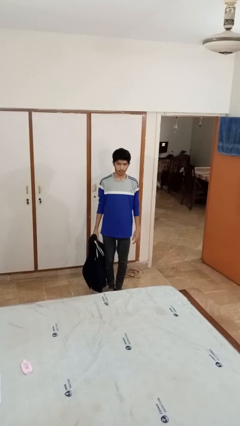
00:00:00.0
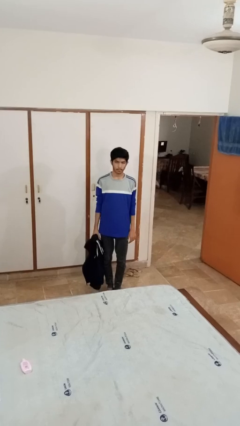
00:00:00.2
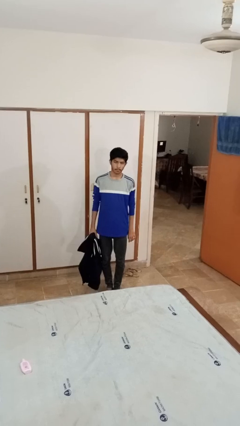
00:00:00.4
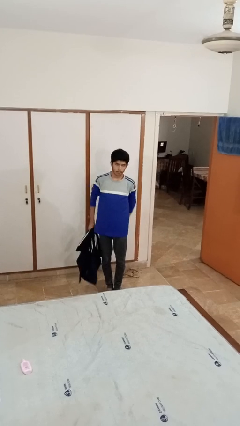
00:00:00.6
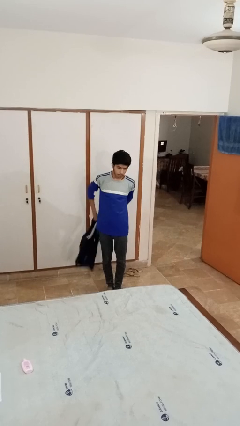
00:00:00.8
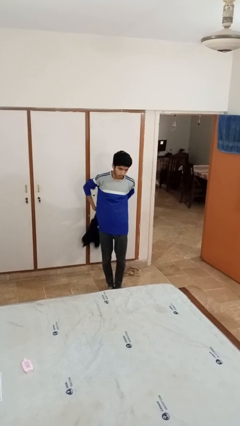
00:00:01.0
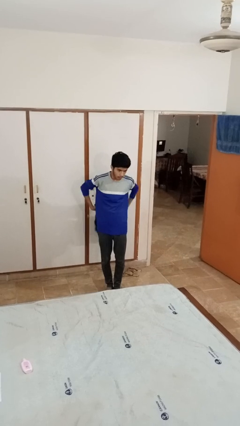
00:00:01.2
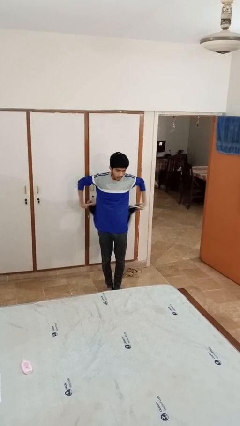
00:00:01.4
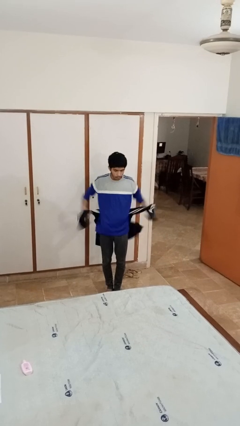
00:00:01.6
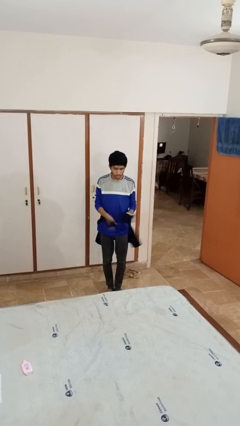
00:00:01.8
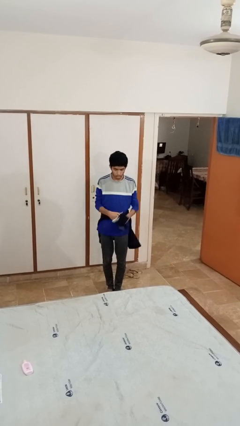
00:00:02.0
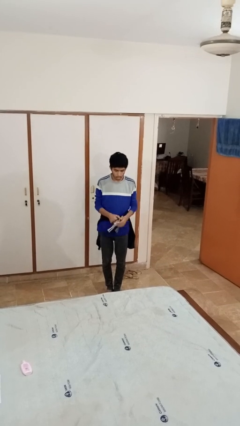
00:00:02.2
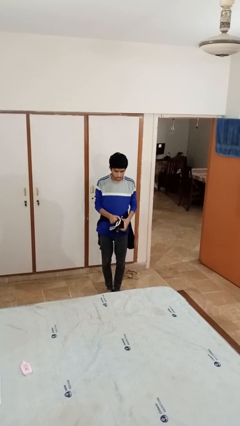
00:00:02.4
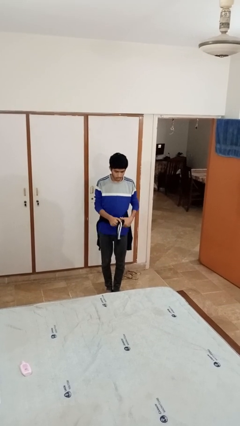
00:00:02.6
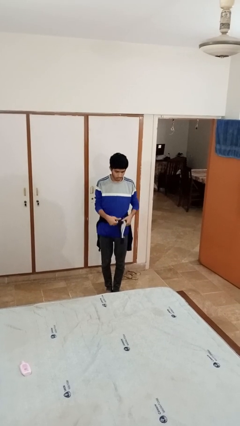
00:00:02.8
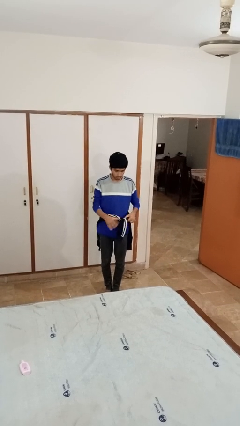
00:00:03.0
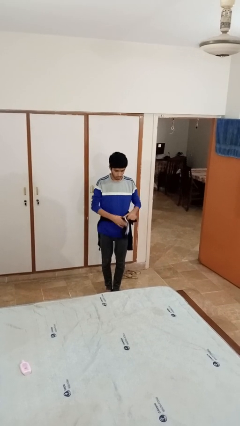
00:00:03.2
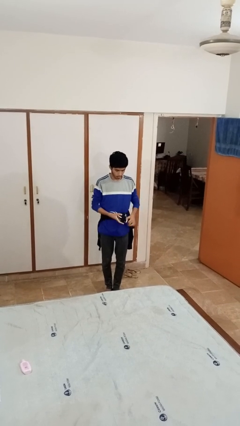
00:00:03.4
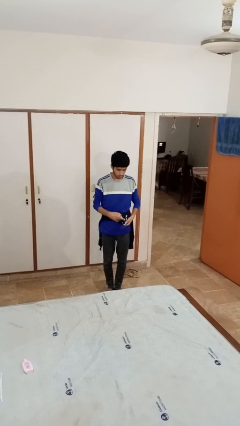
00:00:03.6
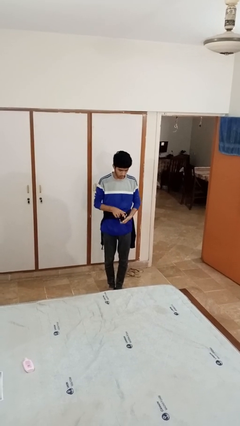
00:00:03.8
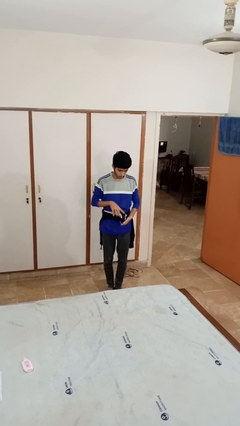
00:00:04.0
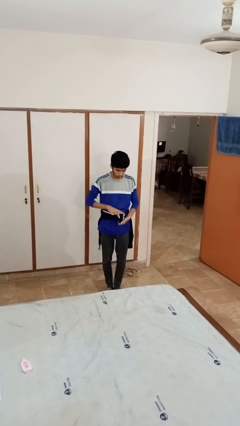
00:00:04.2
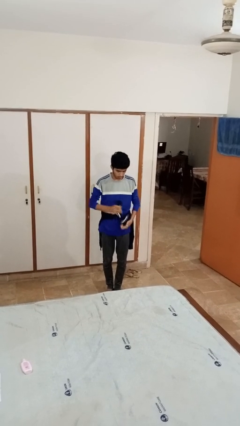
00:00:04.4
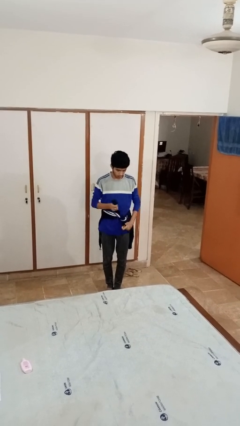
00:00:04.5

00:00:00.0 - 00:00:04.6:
person ties jacket around waist

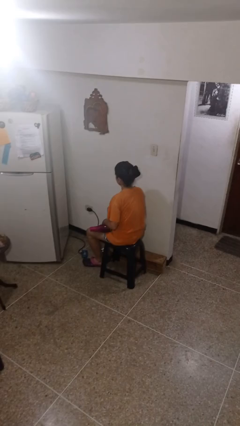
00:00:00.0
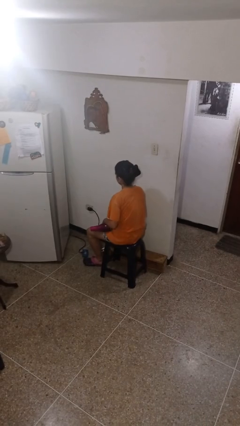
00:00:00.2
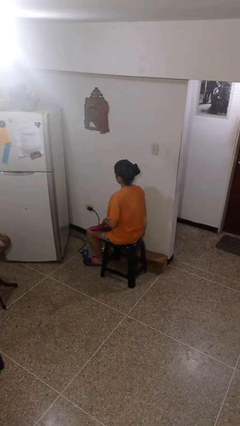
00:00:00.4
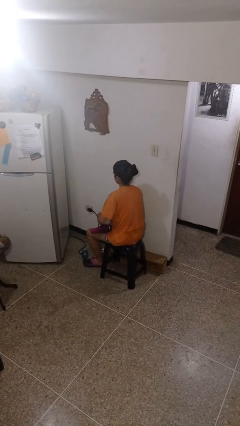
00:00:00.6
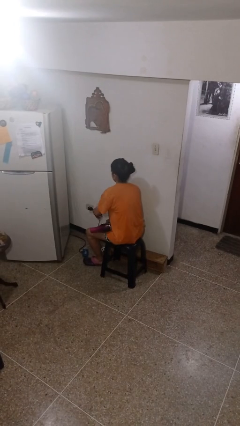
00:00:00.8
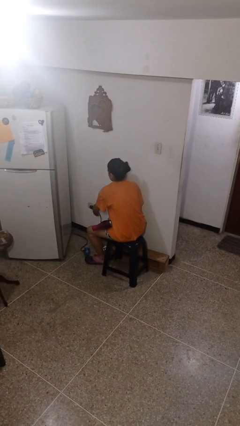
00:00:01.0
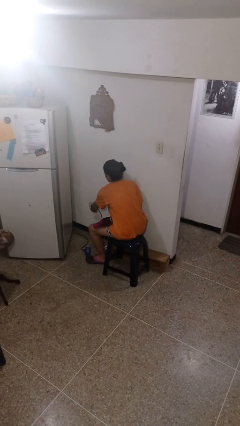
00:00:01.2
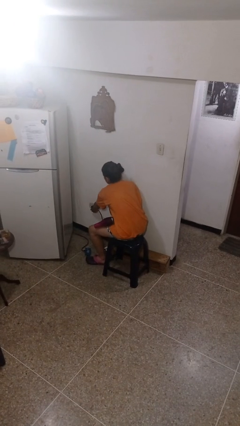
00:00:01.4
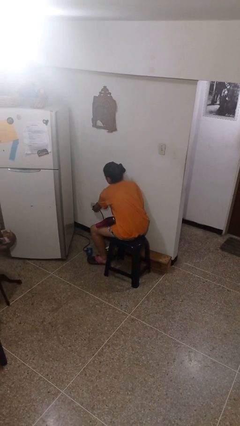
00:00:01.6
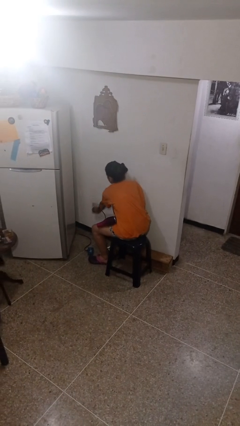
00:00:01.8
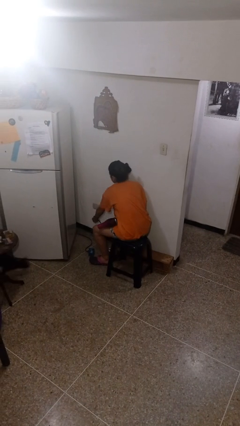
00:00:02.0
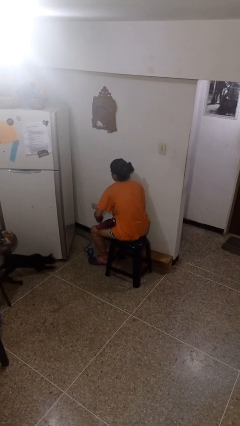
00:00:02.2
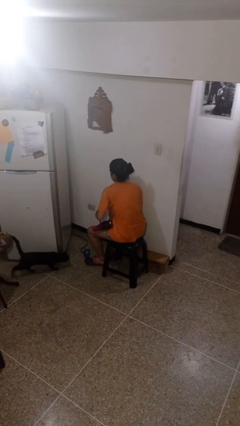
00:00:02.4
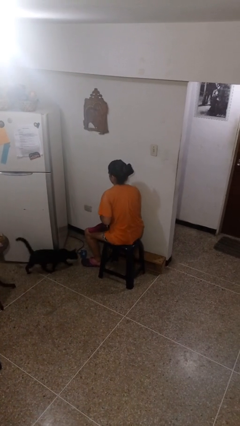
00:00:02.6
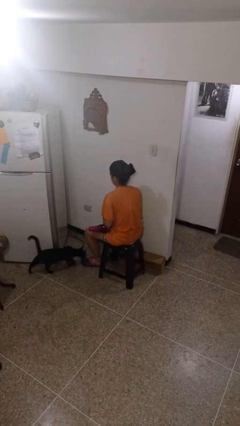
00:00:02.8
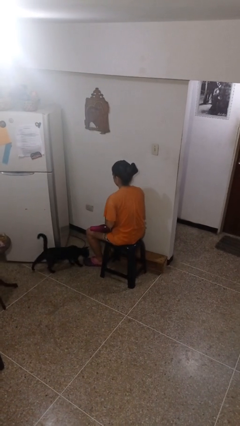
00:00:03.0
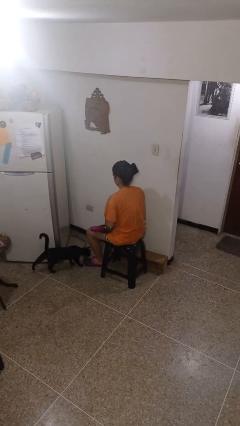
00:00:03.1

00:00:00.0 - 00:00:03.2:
person unplugs from electrical socket

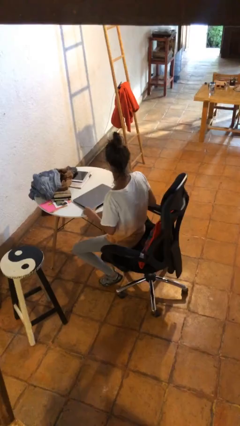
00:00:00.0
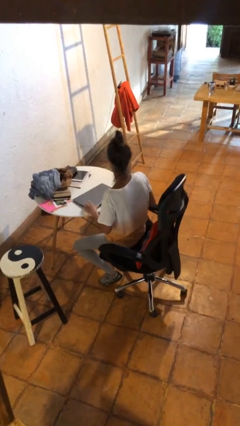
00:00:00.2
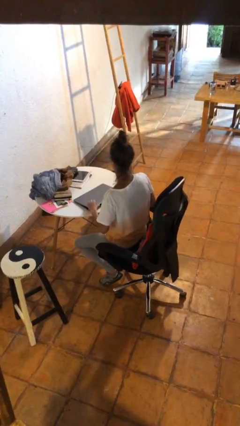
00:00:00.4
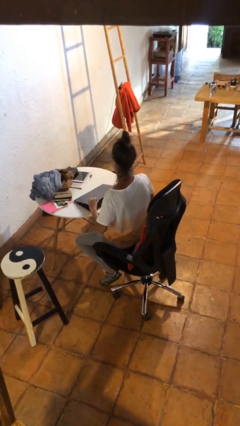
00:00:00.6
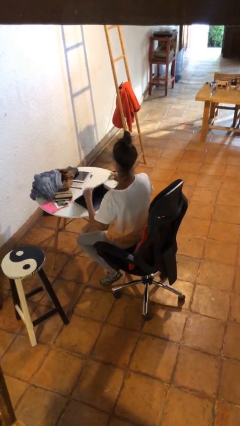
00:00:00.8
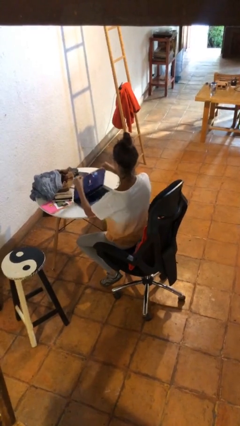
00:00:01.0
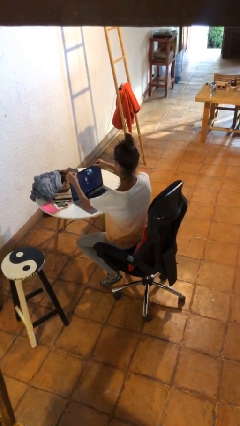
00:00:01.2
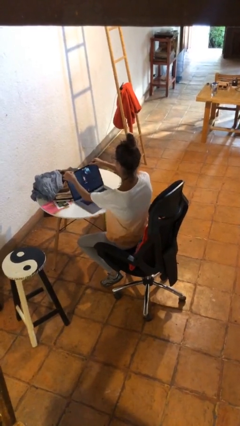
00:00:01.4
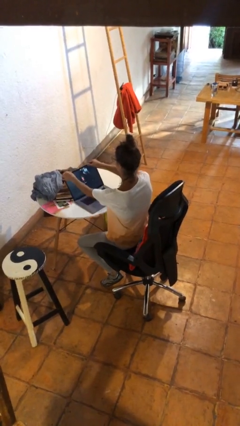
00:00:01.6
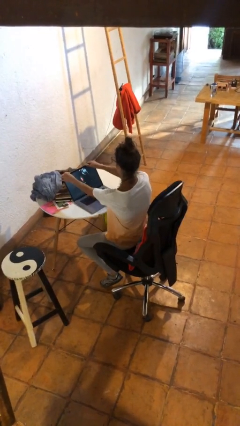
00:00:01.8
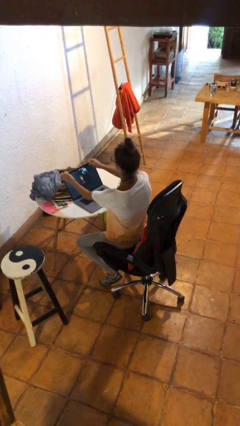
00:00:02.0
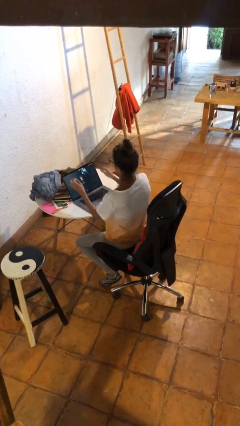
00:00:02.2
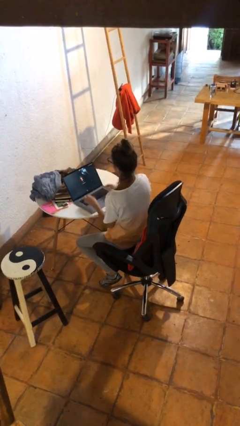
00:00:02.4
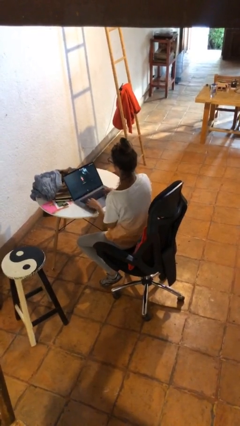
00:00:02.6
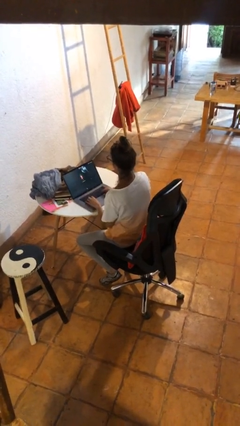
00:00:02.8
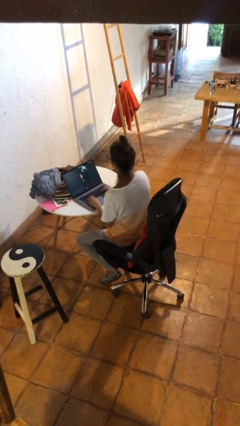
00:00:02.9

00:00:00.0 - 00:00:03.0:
person opens laptop

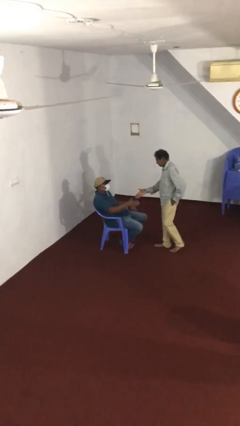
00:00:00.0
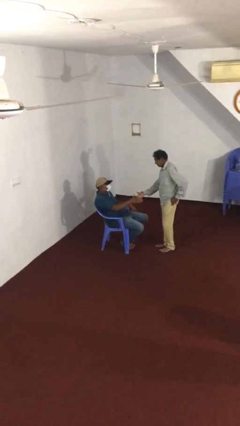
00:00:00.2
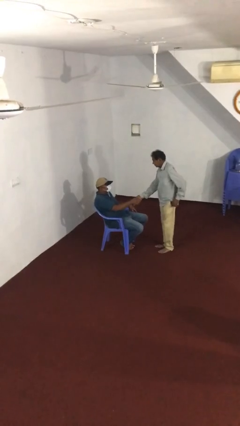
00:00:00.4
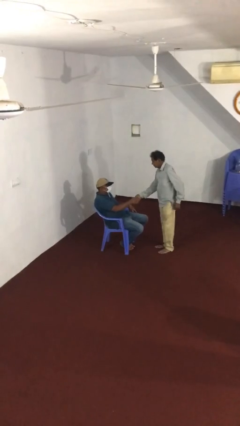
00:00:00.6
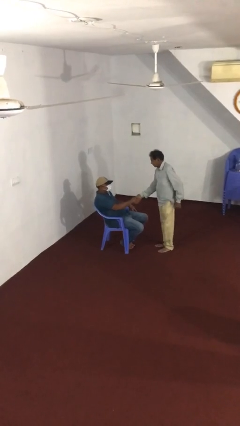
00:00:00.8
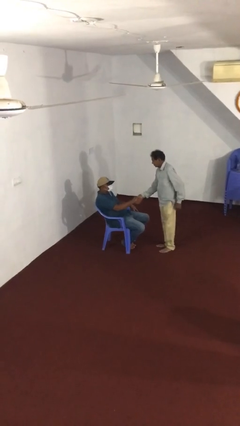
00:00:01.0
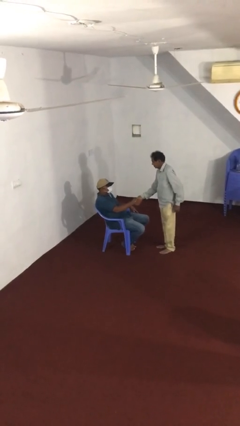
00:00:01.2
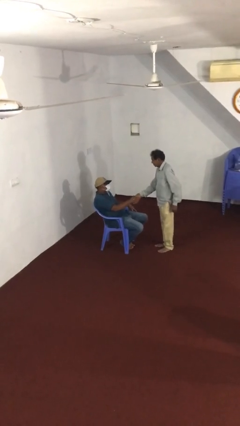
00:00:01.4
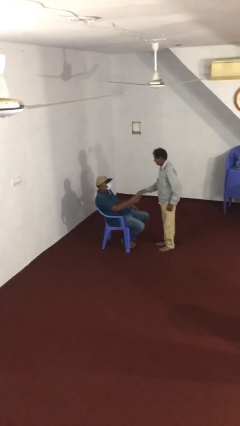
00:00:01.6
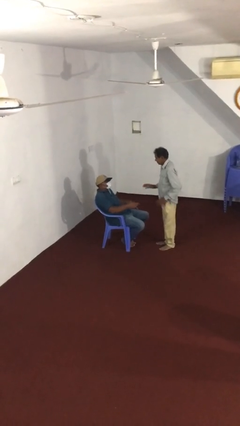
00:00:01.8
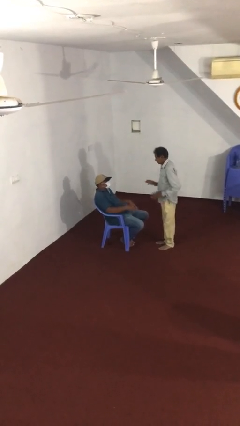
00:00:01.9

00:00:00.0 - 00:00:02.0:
person shakes hand

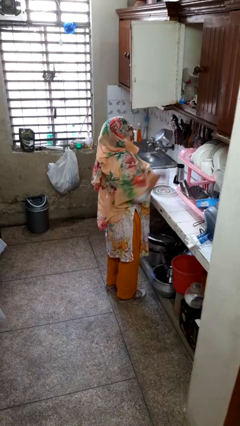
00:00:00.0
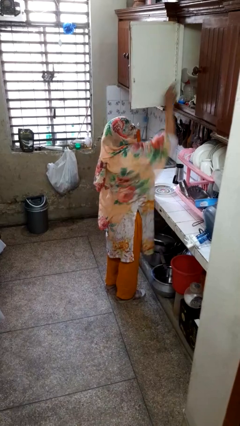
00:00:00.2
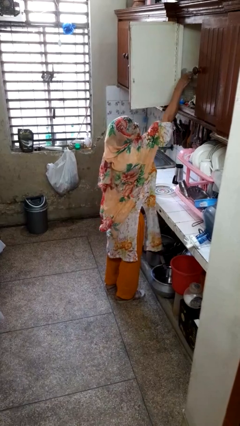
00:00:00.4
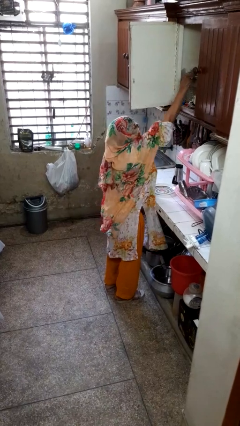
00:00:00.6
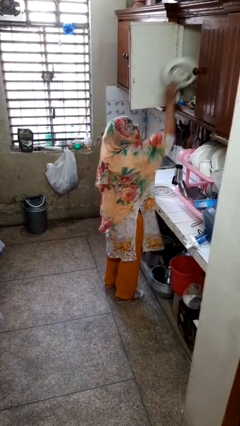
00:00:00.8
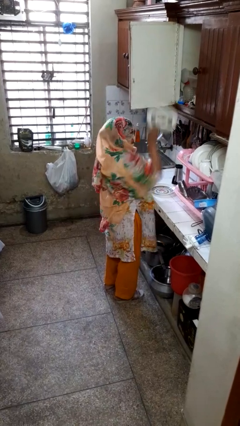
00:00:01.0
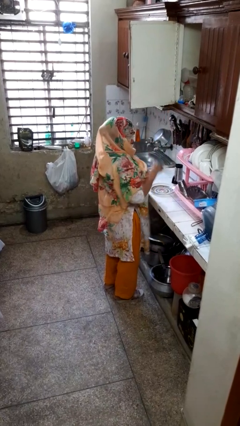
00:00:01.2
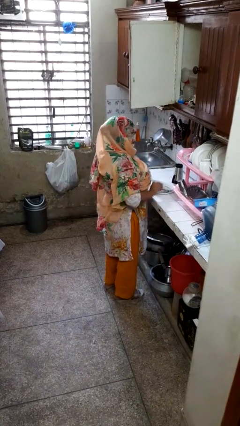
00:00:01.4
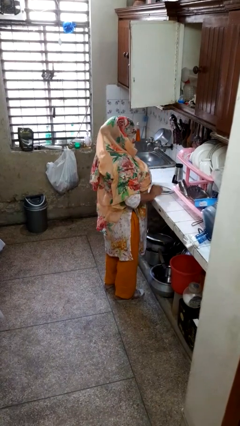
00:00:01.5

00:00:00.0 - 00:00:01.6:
person takes object from cabinet

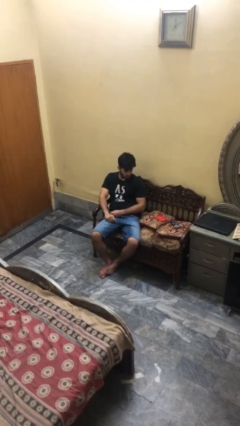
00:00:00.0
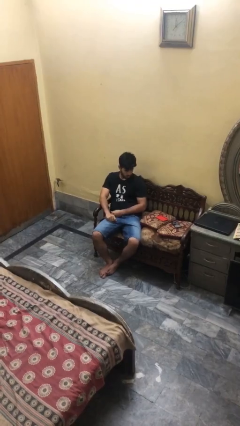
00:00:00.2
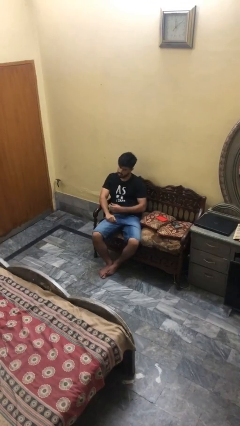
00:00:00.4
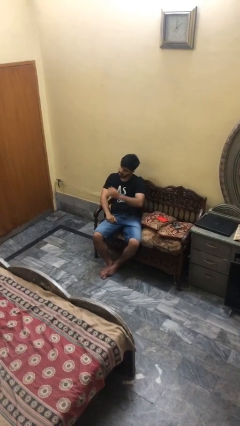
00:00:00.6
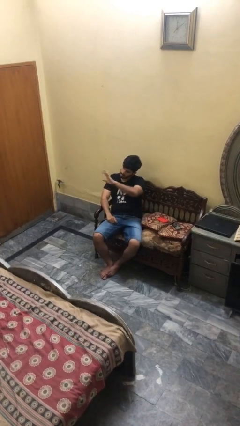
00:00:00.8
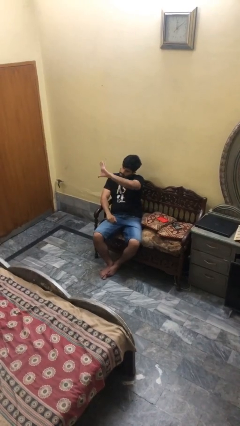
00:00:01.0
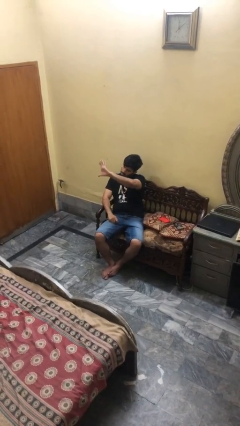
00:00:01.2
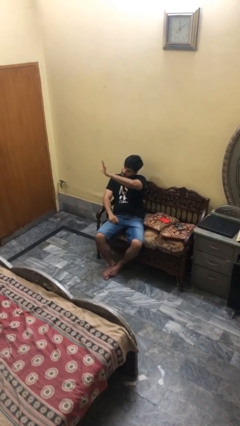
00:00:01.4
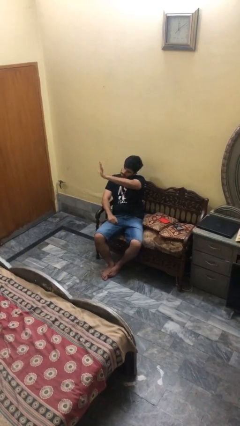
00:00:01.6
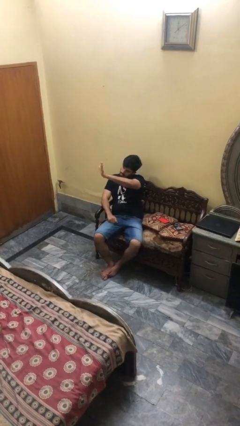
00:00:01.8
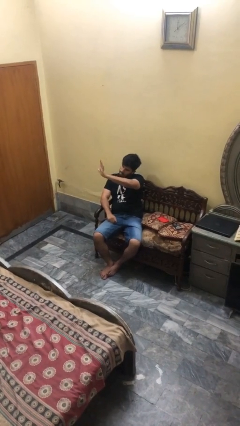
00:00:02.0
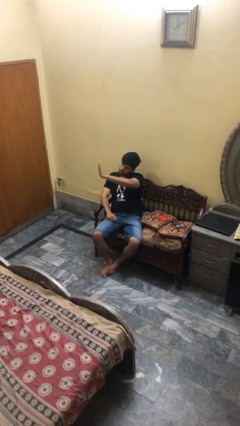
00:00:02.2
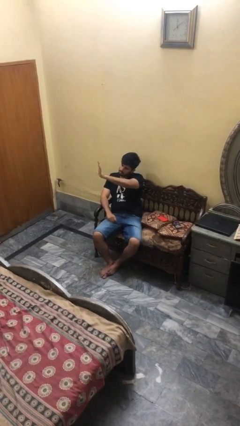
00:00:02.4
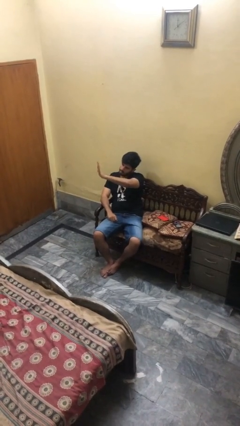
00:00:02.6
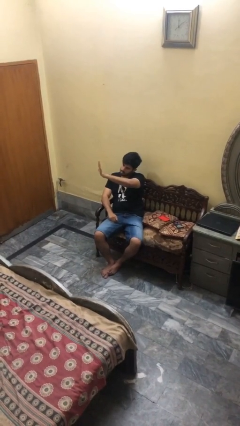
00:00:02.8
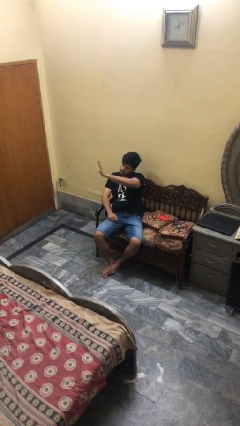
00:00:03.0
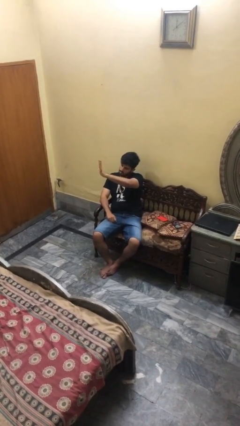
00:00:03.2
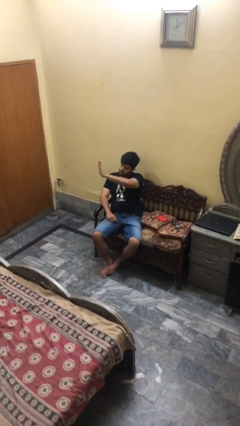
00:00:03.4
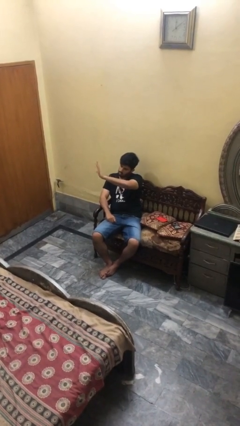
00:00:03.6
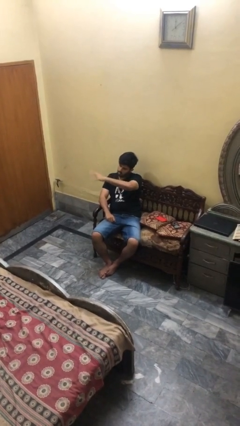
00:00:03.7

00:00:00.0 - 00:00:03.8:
person waves at person
